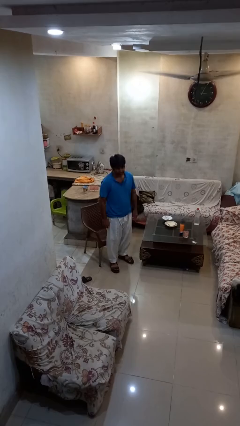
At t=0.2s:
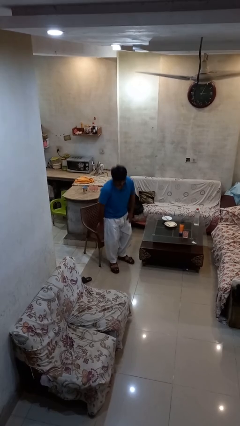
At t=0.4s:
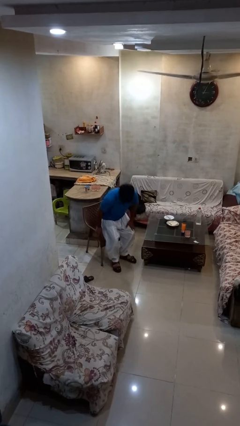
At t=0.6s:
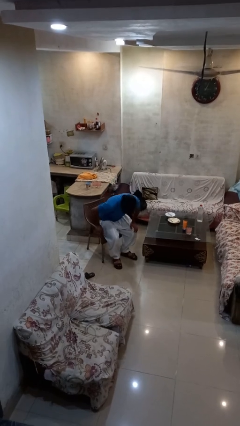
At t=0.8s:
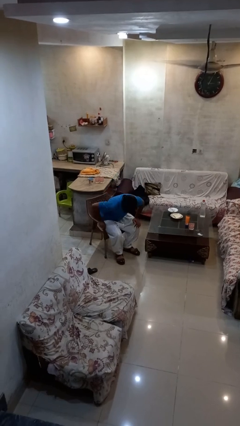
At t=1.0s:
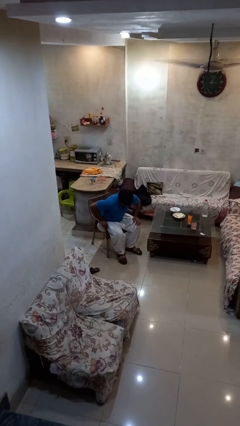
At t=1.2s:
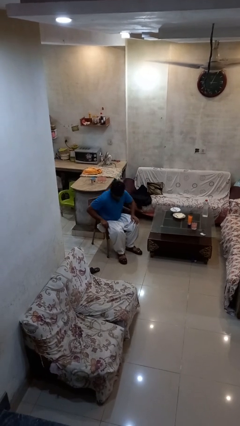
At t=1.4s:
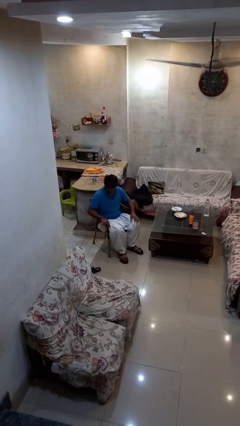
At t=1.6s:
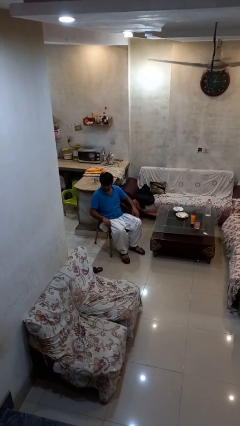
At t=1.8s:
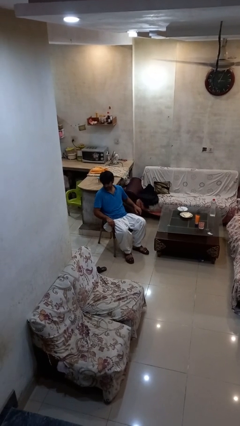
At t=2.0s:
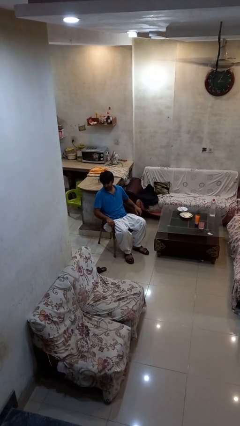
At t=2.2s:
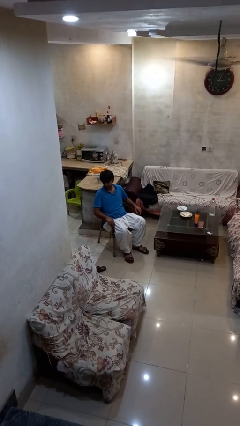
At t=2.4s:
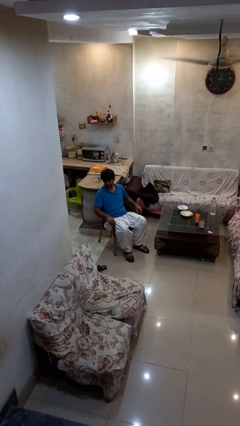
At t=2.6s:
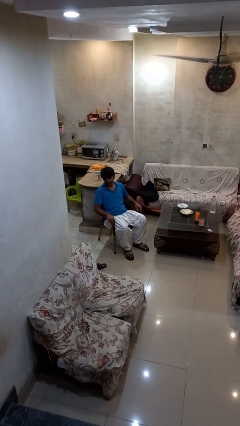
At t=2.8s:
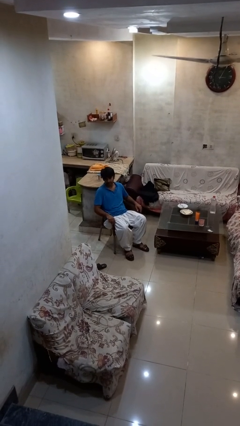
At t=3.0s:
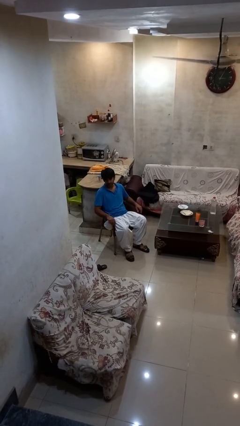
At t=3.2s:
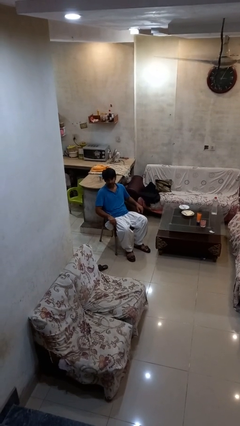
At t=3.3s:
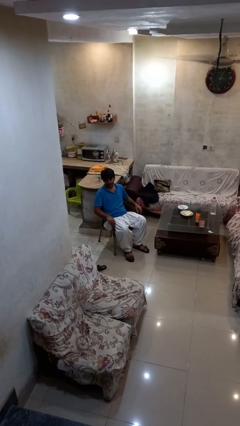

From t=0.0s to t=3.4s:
person sits down

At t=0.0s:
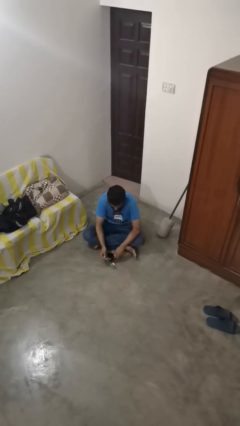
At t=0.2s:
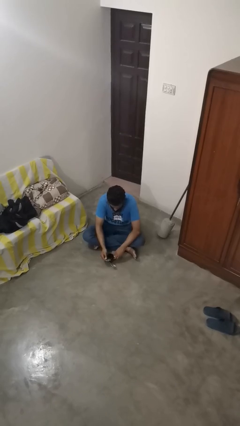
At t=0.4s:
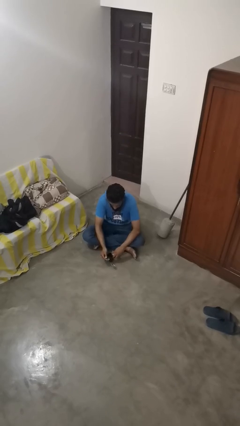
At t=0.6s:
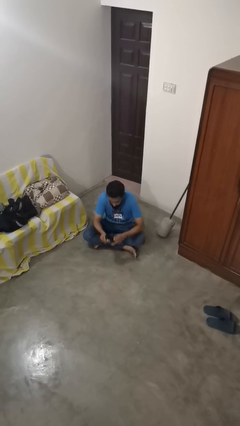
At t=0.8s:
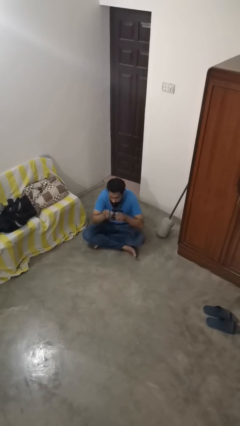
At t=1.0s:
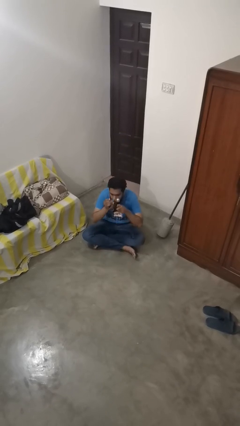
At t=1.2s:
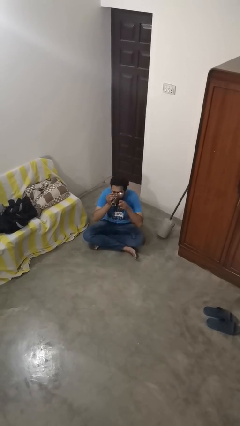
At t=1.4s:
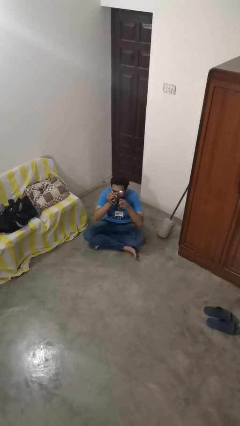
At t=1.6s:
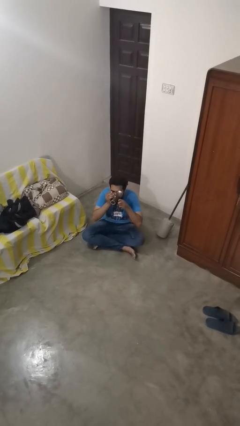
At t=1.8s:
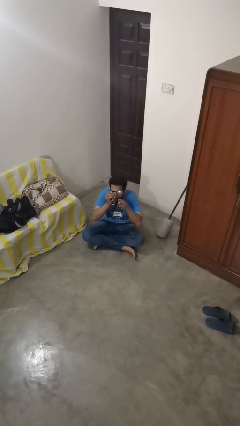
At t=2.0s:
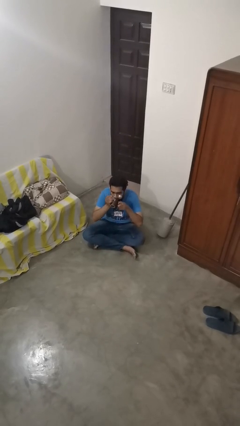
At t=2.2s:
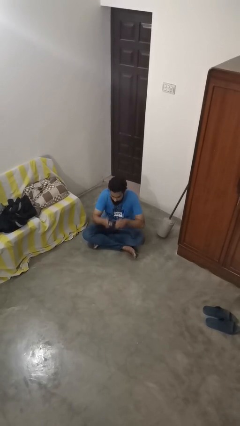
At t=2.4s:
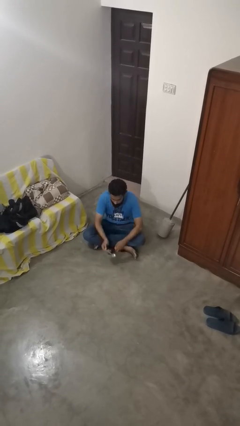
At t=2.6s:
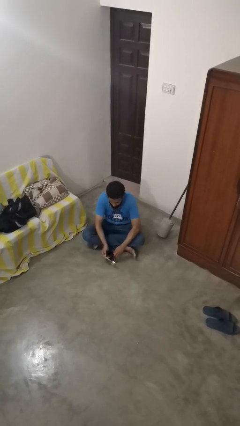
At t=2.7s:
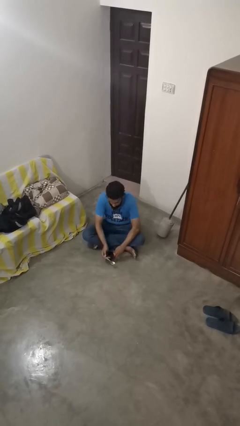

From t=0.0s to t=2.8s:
person drinks from mug

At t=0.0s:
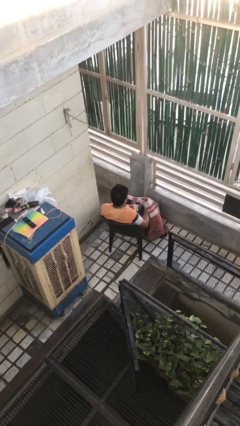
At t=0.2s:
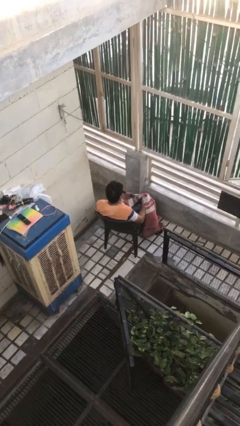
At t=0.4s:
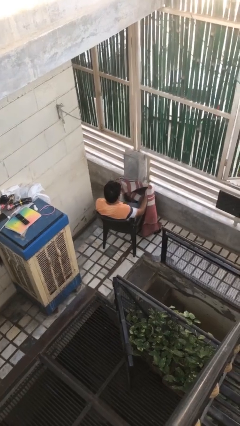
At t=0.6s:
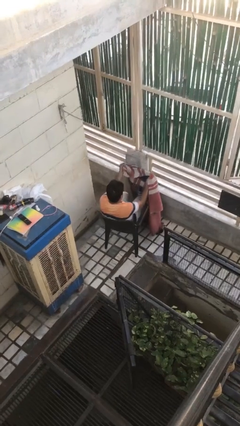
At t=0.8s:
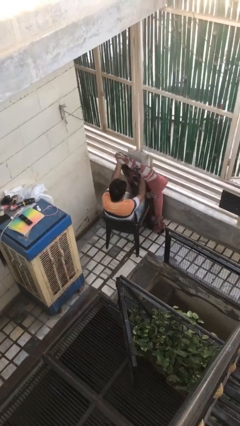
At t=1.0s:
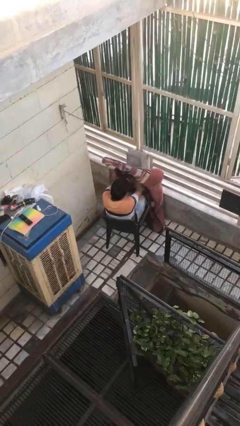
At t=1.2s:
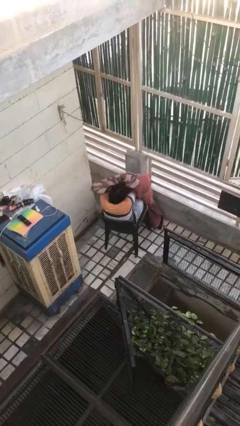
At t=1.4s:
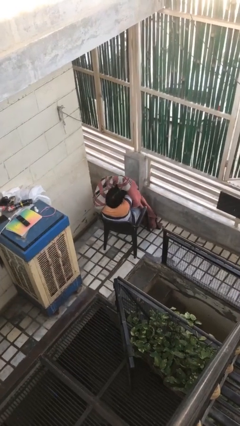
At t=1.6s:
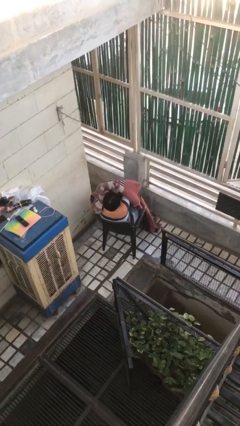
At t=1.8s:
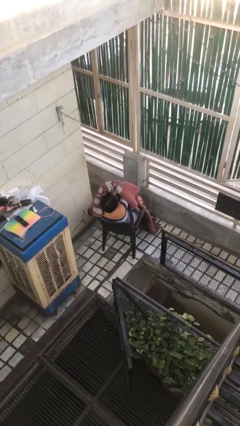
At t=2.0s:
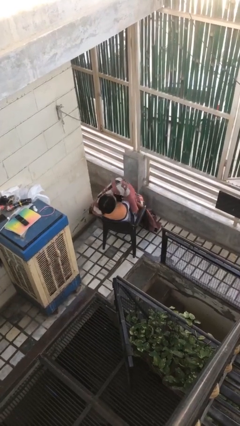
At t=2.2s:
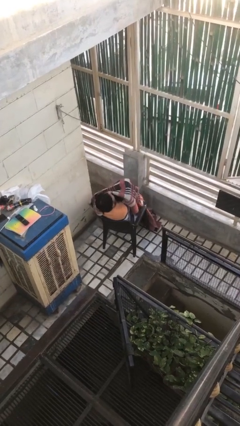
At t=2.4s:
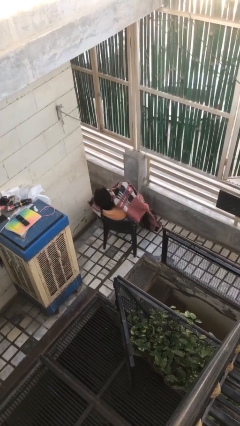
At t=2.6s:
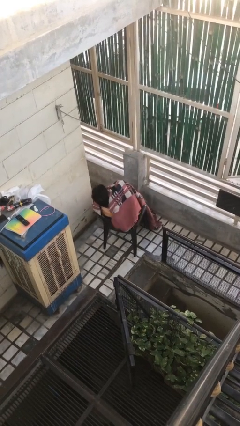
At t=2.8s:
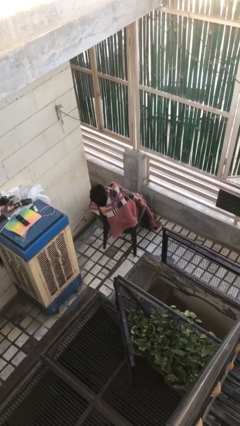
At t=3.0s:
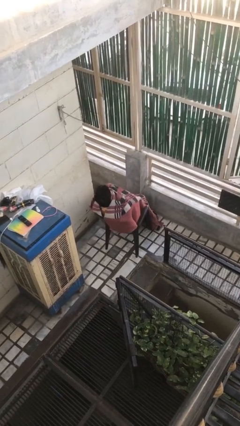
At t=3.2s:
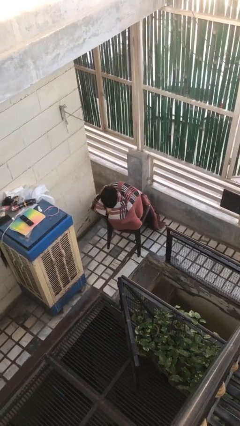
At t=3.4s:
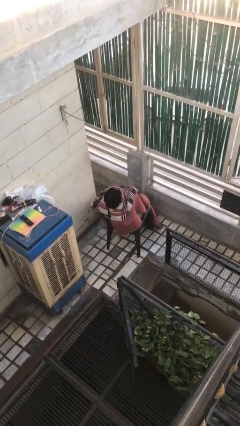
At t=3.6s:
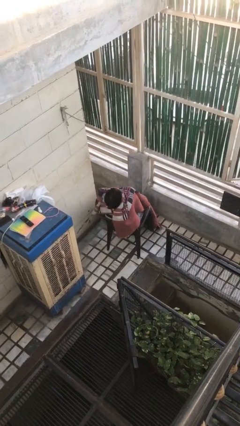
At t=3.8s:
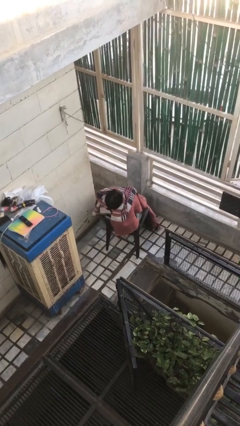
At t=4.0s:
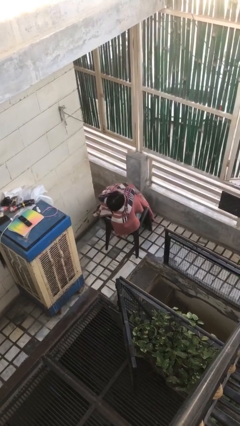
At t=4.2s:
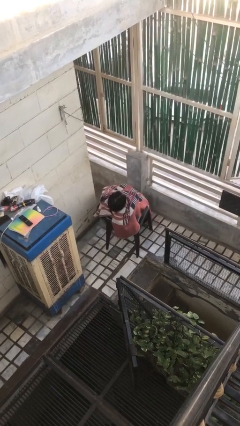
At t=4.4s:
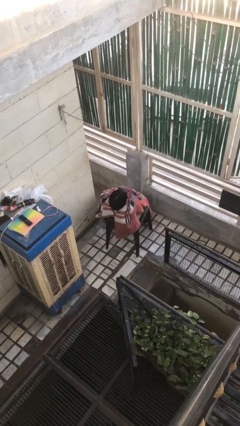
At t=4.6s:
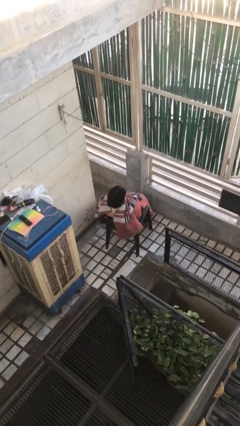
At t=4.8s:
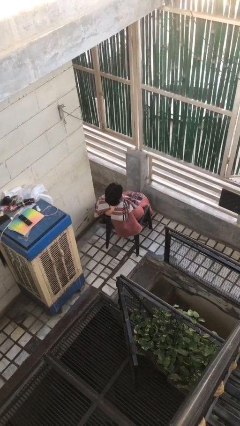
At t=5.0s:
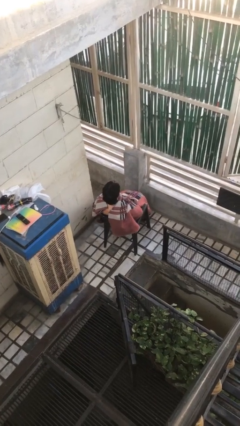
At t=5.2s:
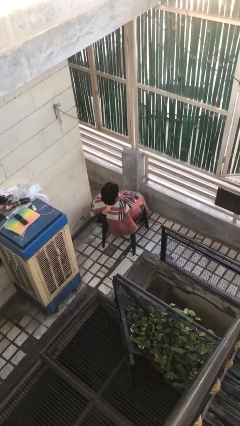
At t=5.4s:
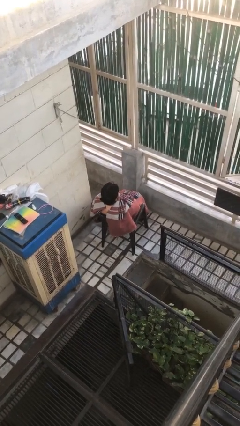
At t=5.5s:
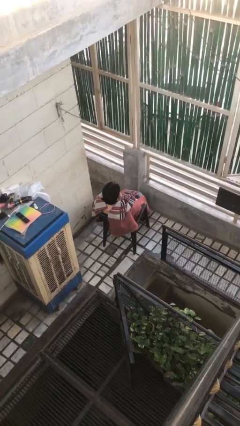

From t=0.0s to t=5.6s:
person covers with blanket

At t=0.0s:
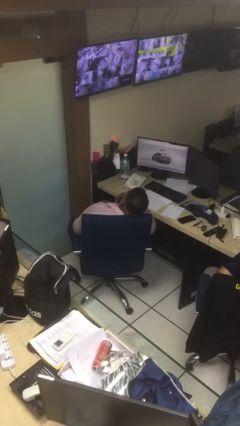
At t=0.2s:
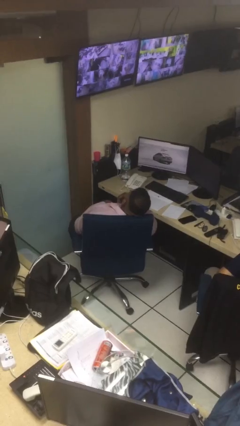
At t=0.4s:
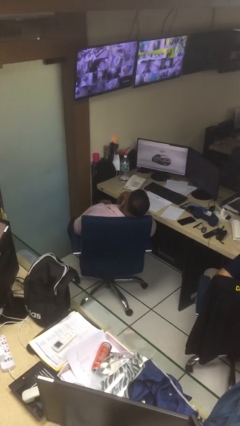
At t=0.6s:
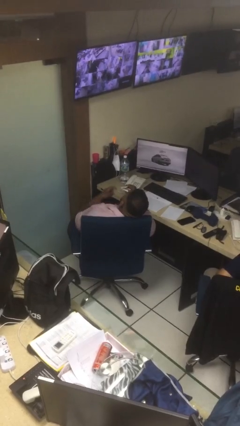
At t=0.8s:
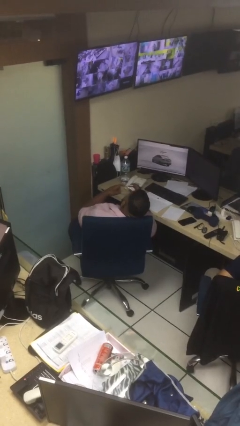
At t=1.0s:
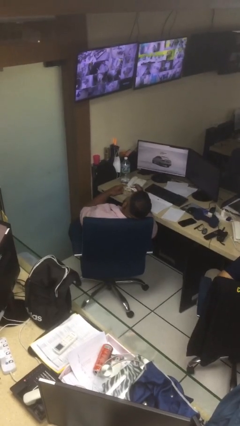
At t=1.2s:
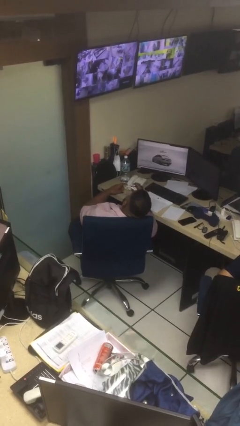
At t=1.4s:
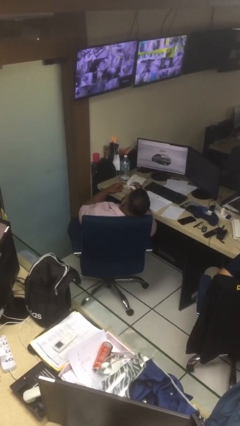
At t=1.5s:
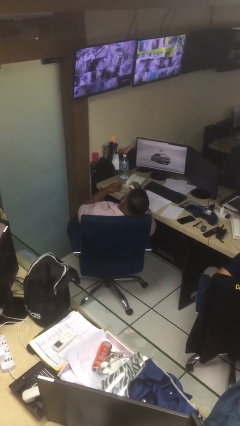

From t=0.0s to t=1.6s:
person clips fingernails

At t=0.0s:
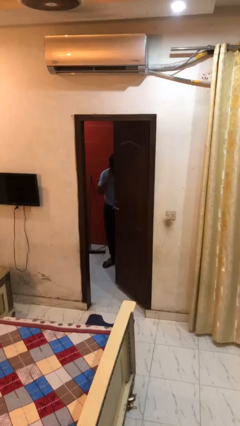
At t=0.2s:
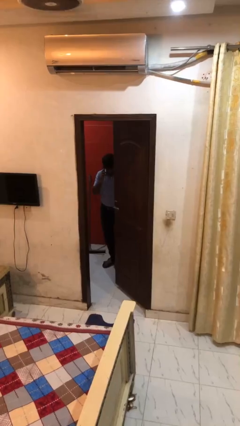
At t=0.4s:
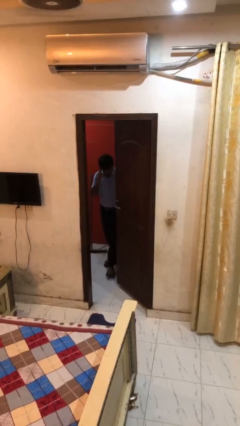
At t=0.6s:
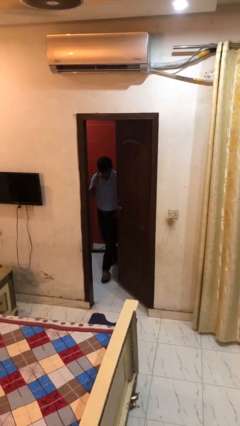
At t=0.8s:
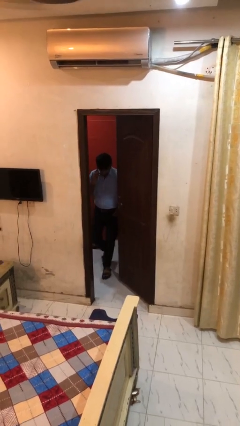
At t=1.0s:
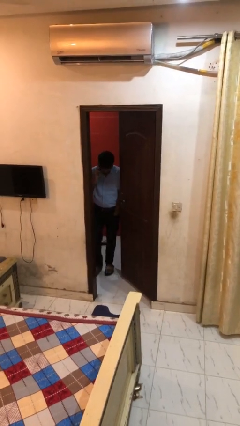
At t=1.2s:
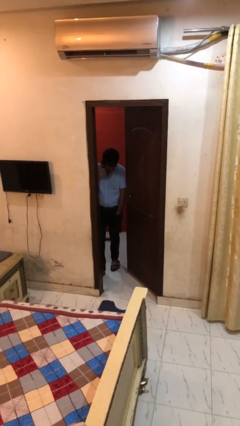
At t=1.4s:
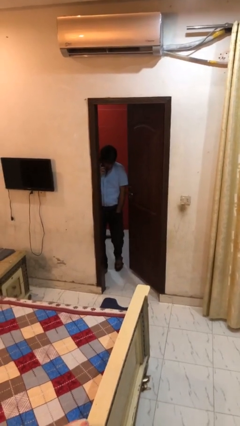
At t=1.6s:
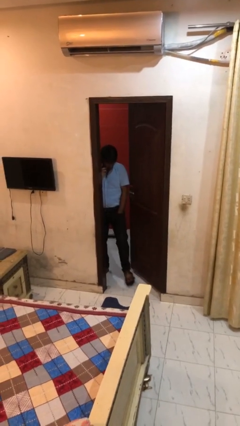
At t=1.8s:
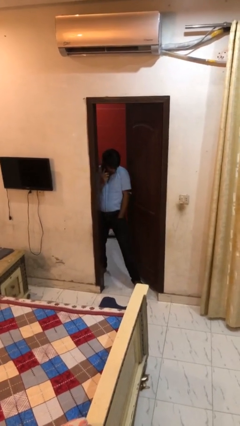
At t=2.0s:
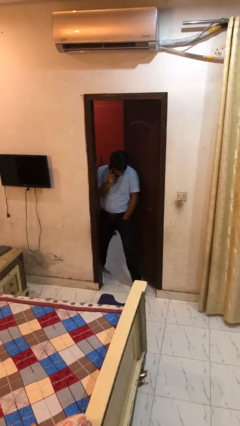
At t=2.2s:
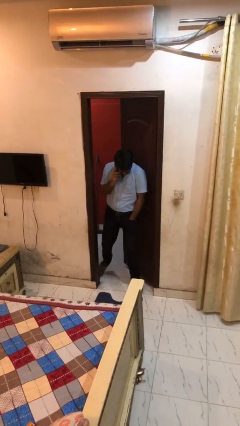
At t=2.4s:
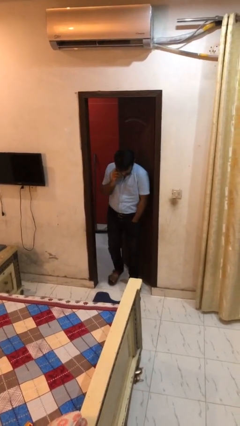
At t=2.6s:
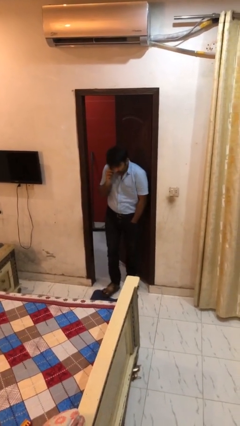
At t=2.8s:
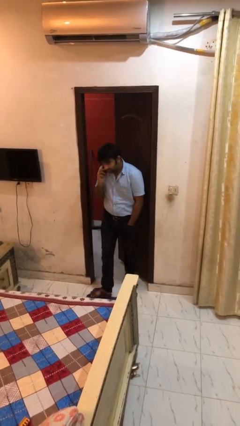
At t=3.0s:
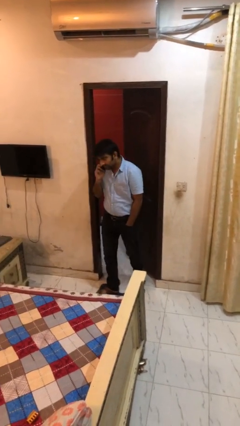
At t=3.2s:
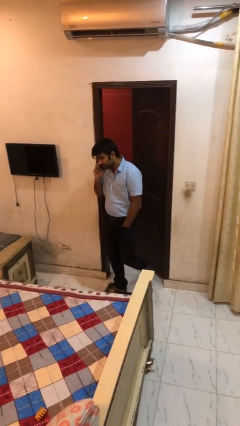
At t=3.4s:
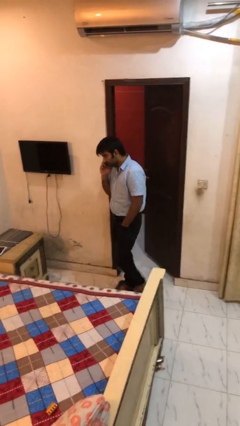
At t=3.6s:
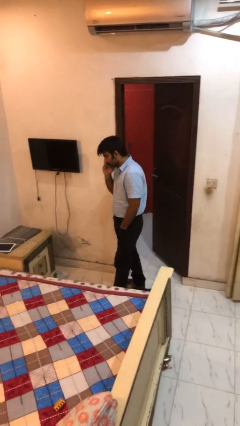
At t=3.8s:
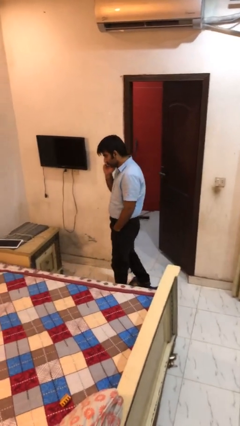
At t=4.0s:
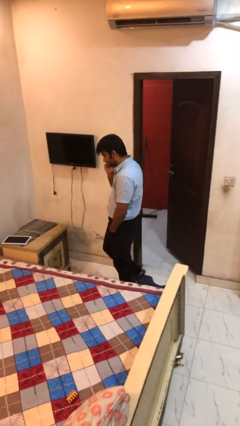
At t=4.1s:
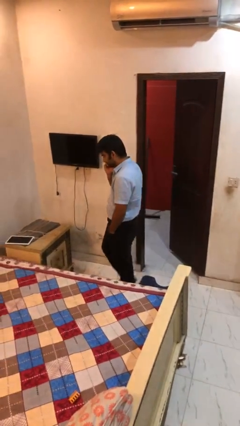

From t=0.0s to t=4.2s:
person enters scene through structure
